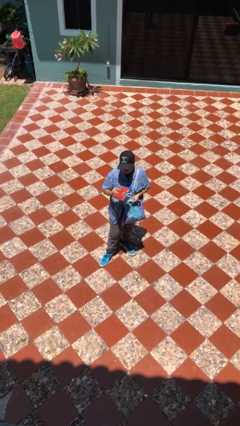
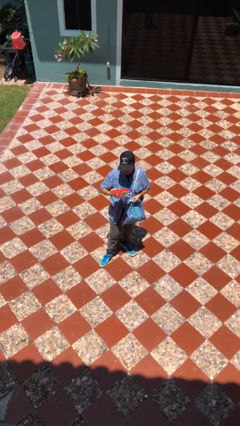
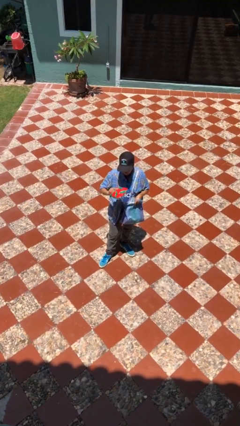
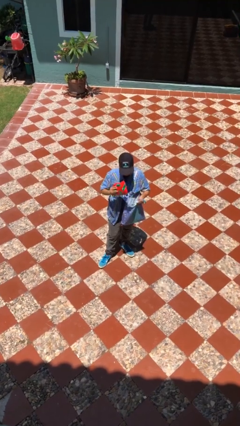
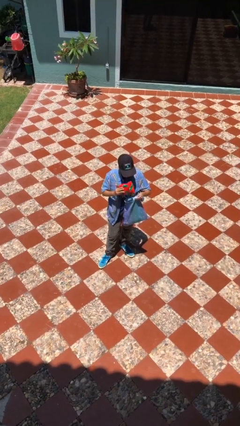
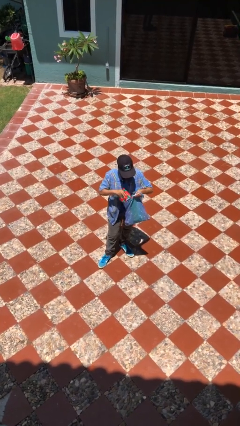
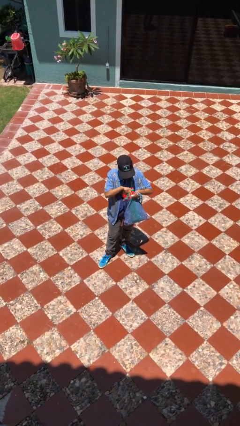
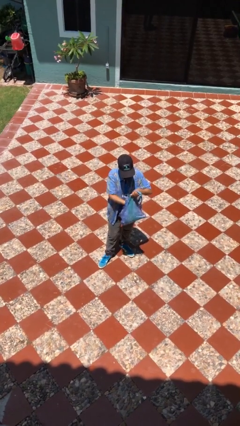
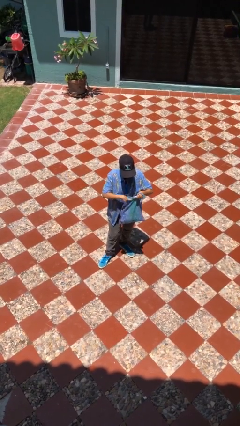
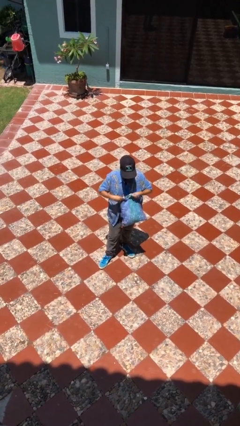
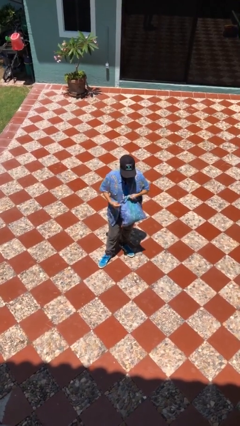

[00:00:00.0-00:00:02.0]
person puts object into purse

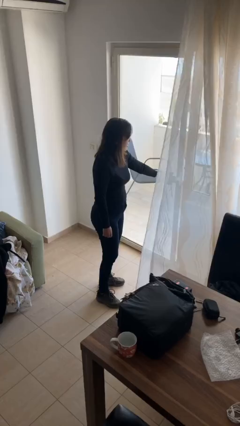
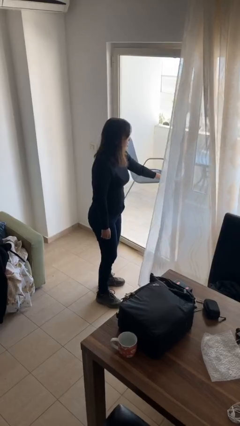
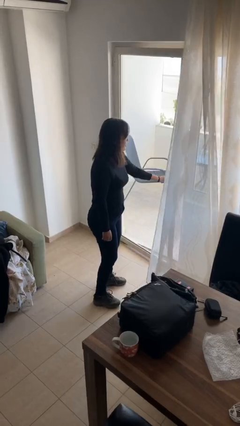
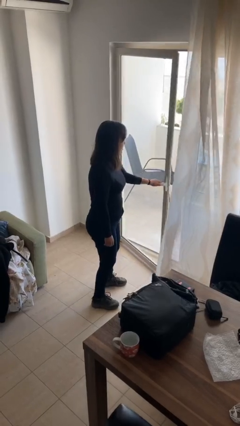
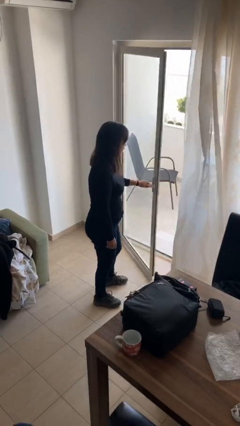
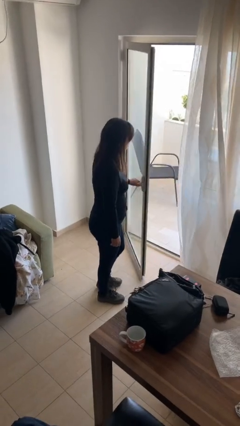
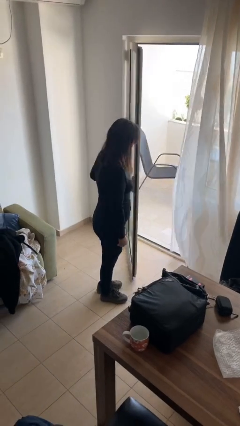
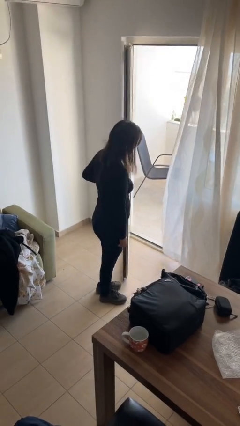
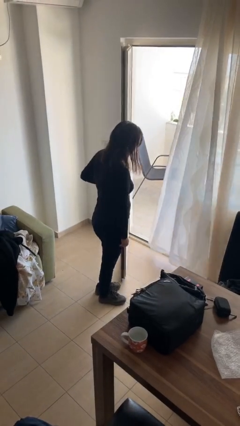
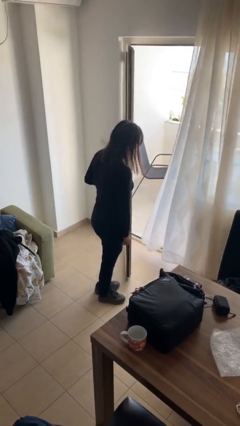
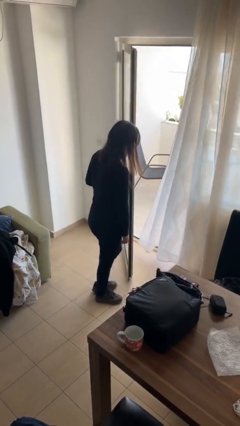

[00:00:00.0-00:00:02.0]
person opens facility door

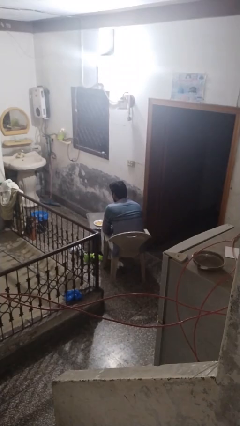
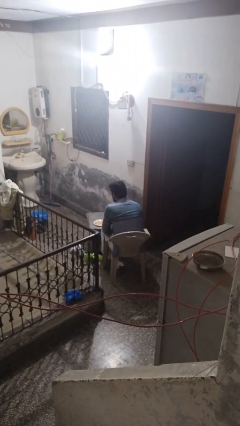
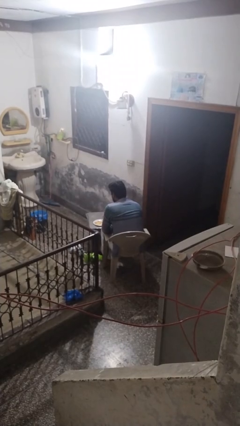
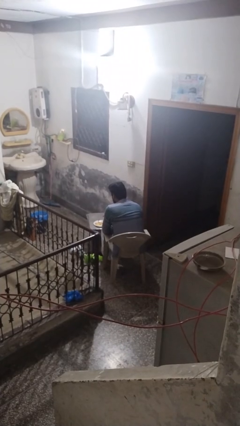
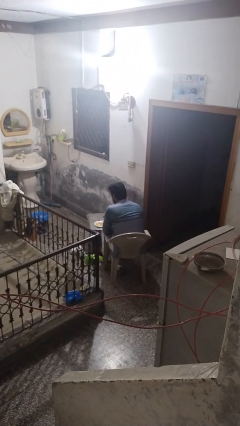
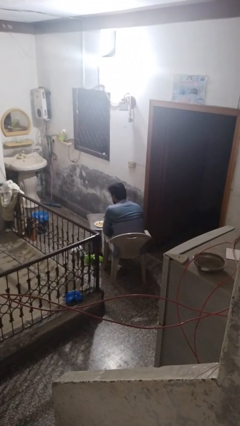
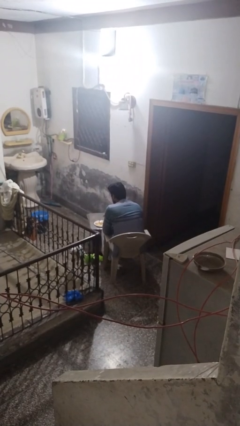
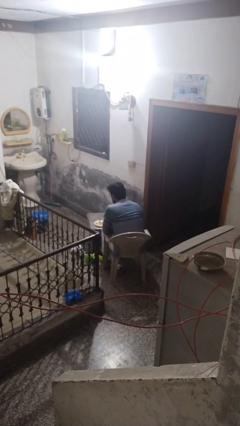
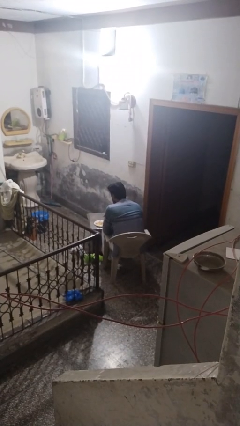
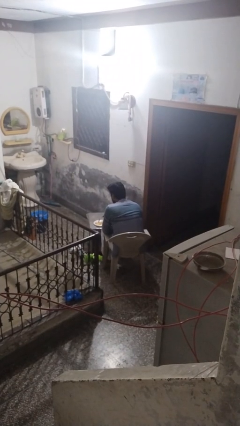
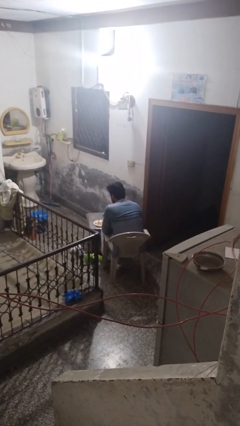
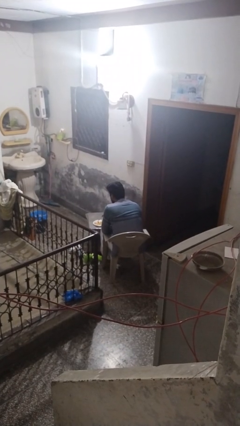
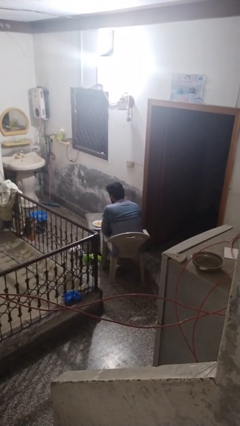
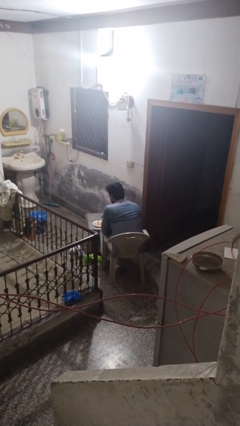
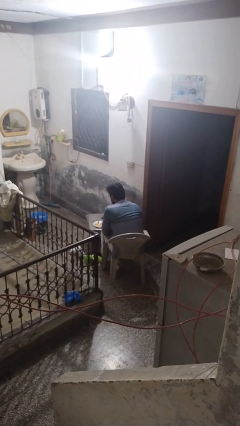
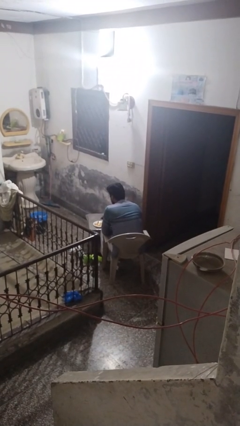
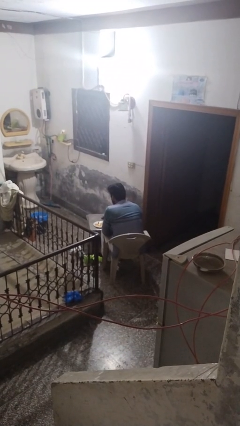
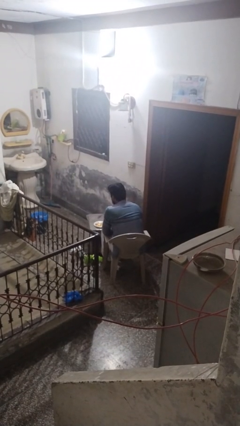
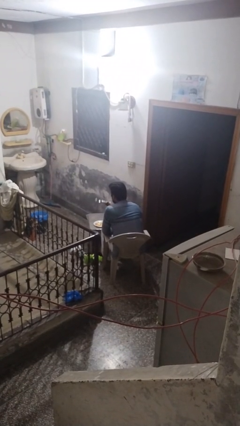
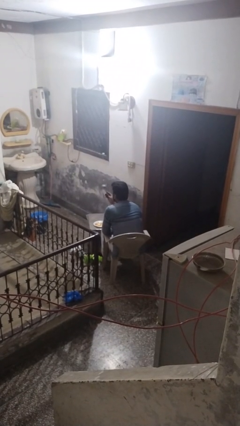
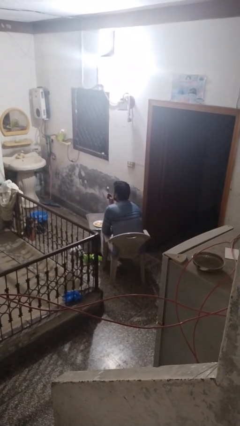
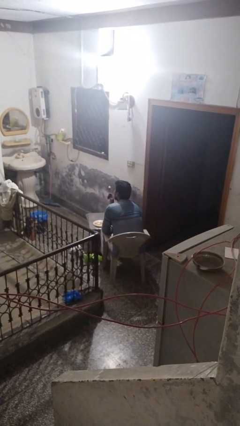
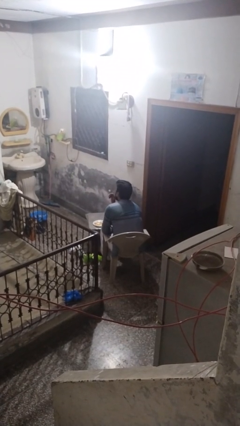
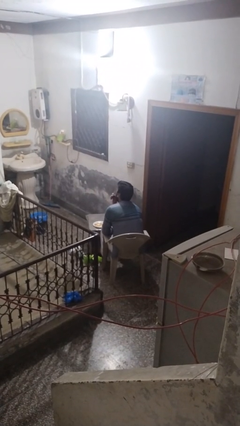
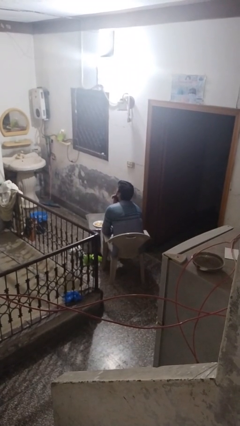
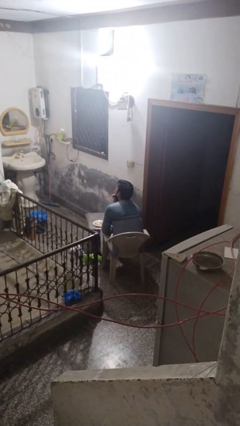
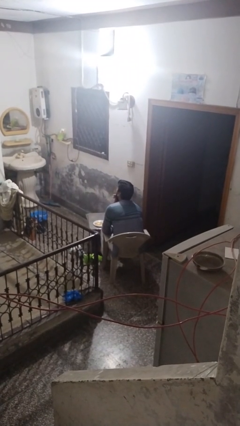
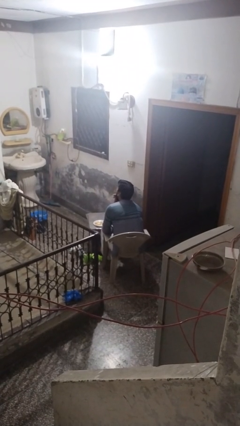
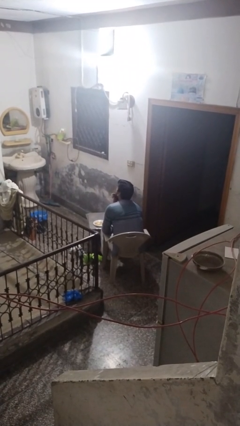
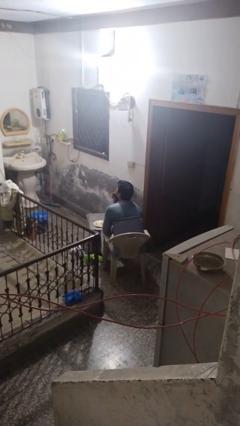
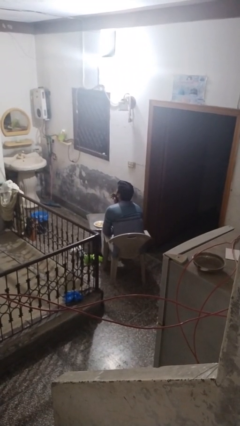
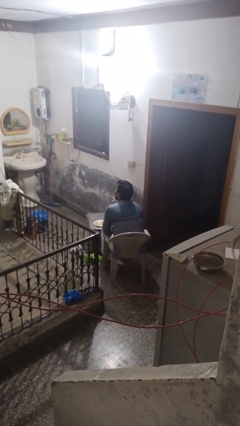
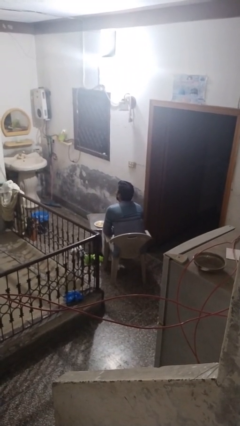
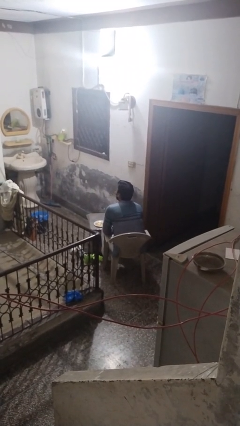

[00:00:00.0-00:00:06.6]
person eats with utensil

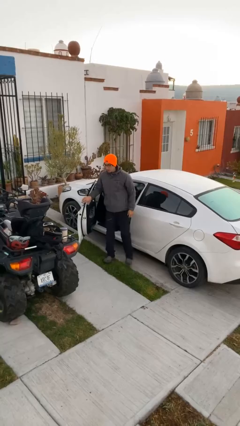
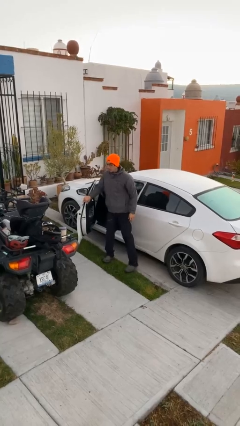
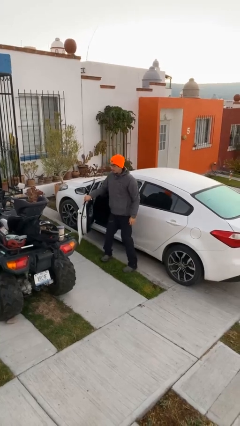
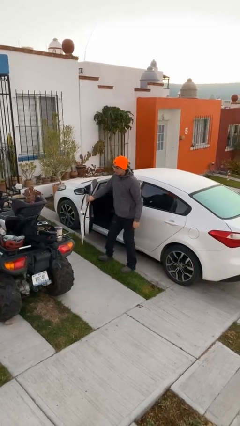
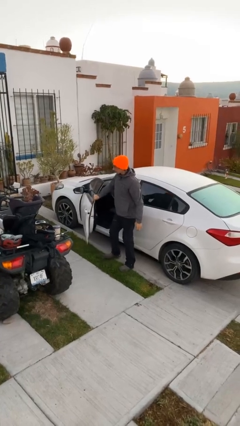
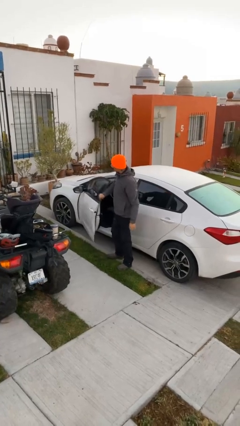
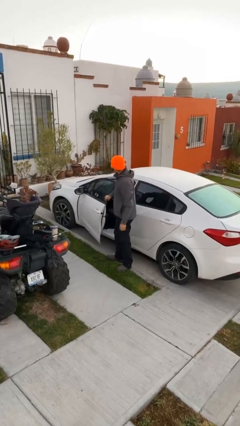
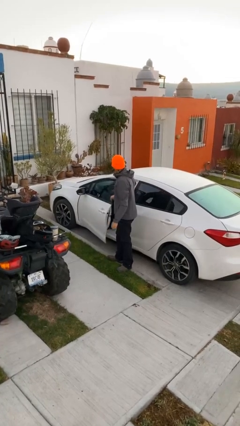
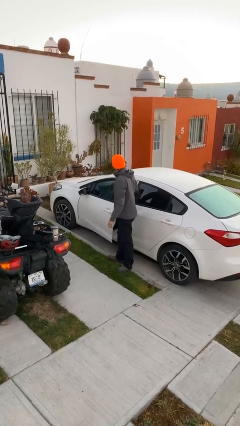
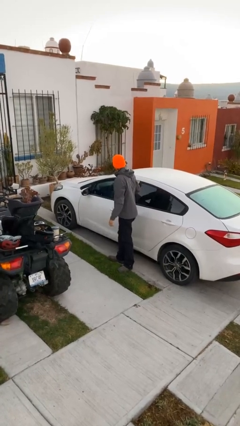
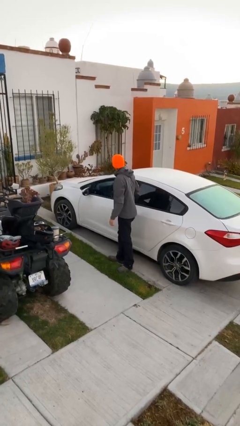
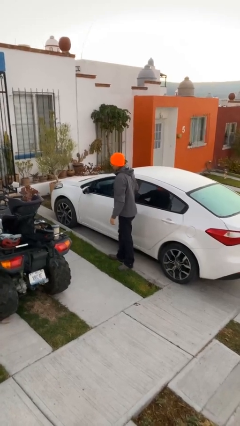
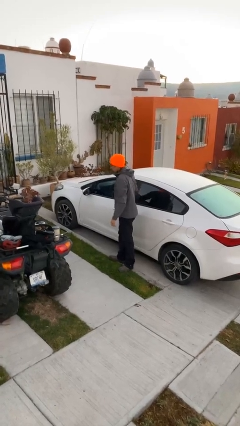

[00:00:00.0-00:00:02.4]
person closes car door

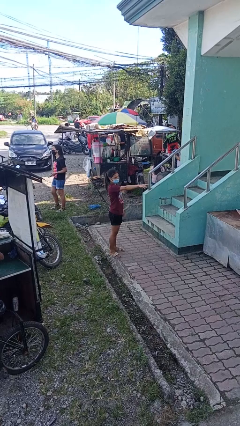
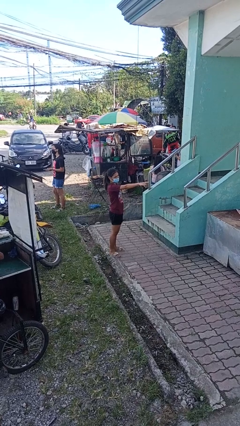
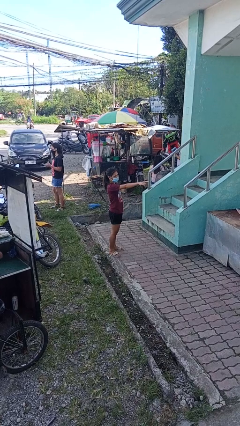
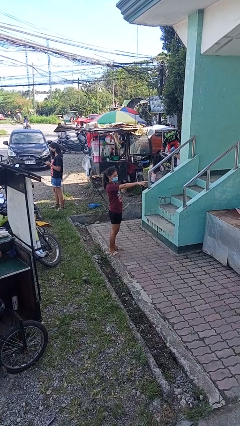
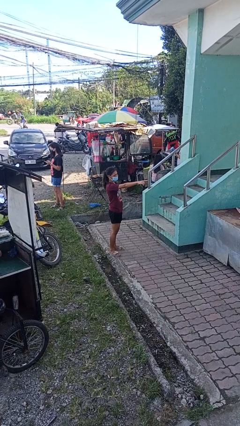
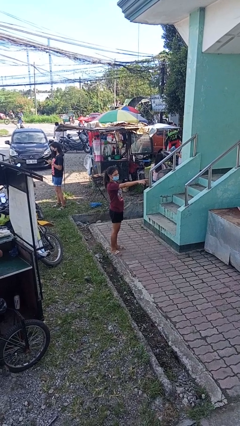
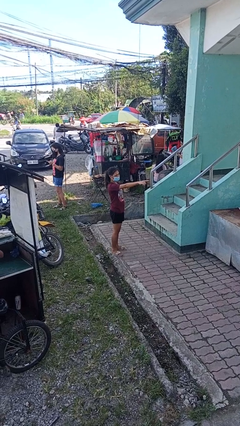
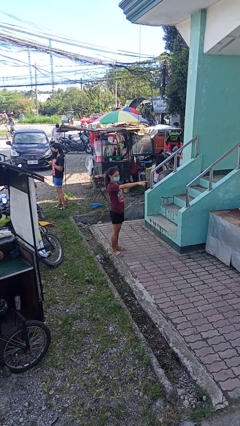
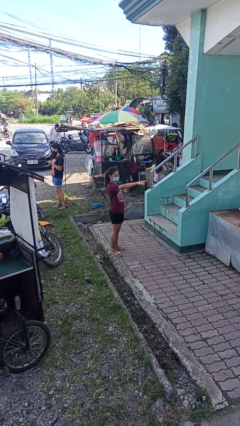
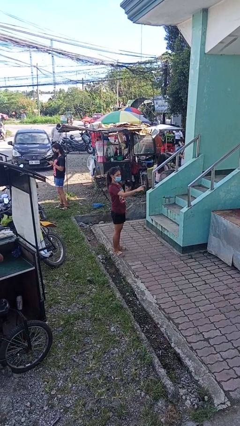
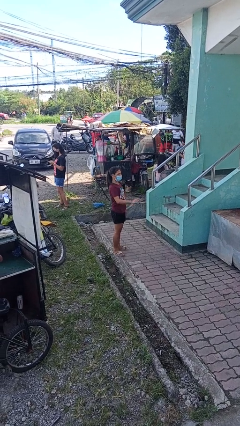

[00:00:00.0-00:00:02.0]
person points at person

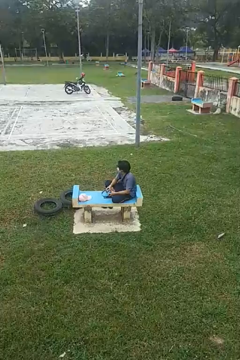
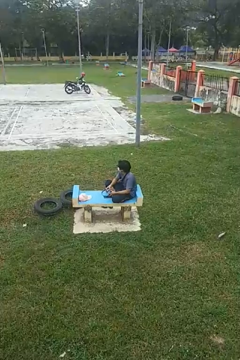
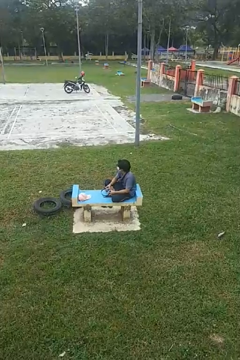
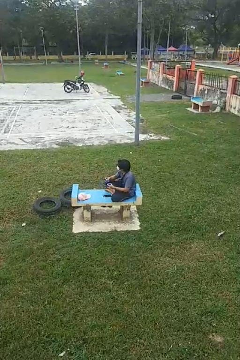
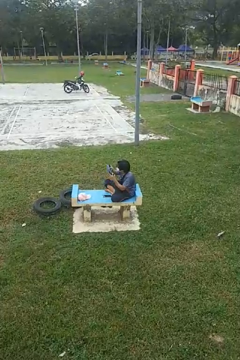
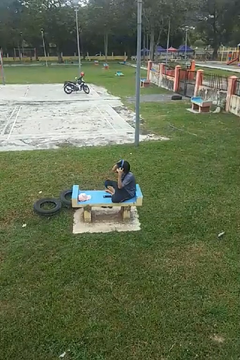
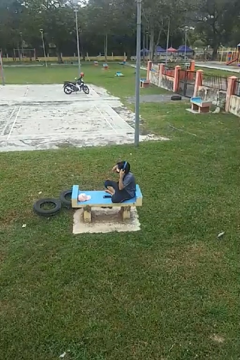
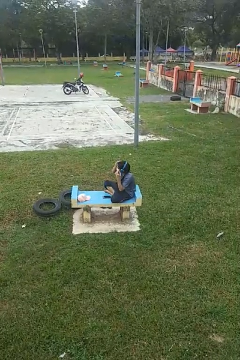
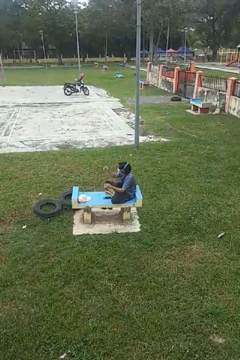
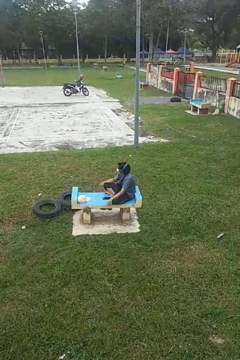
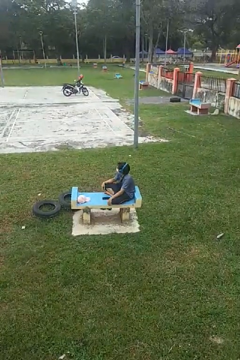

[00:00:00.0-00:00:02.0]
person puts on headphones

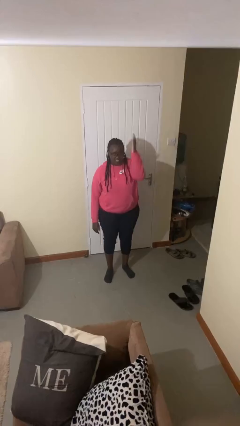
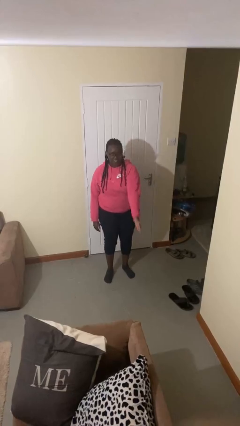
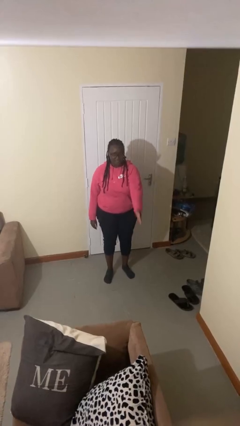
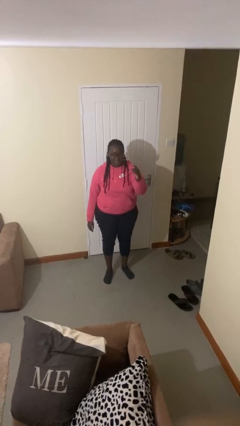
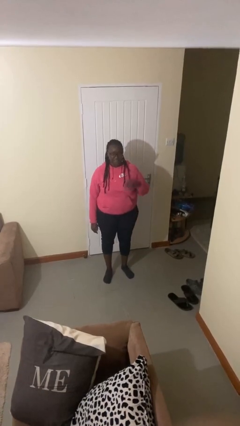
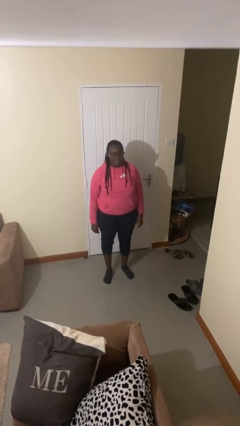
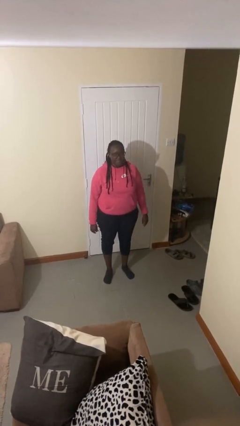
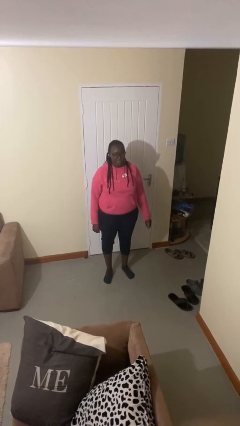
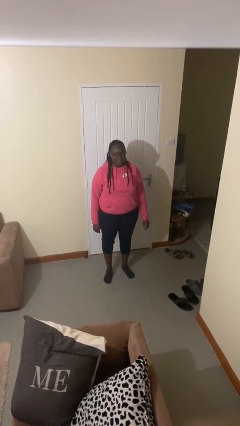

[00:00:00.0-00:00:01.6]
person karate chop
